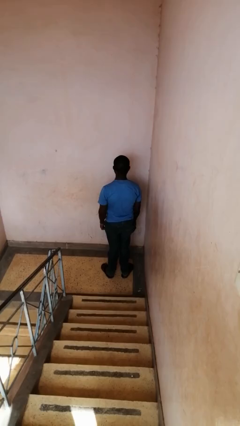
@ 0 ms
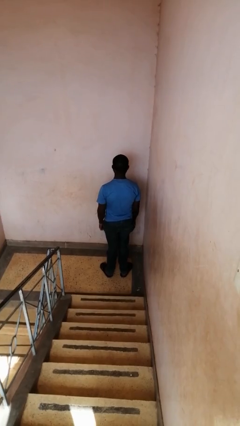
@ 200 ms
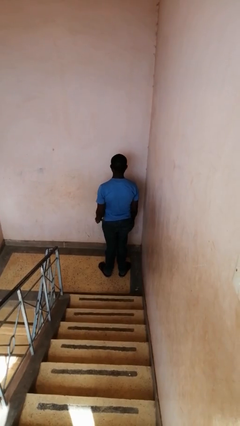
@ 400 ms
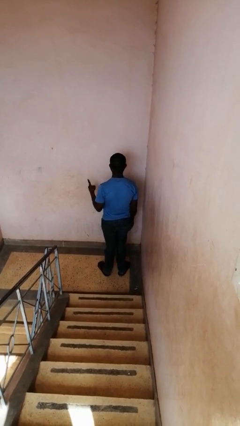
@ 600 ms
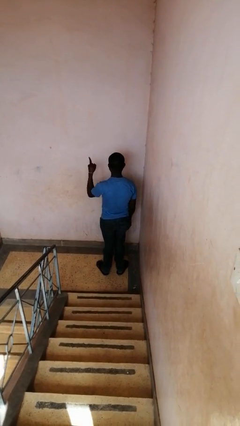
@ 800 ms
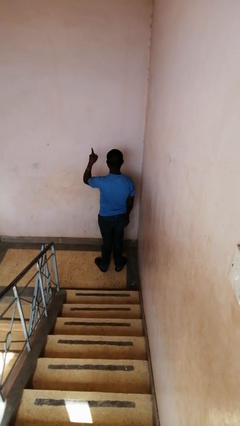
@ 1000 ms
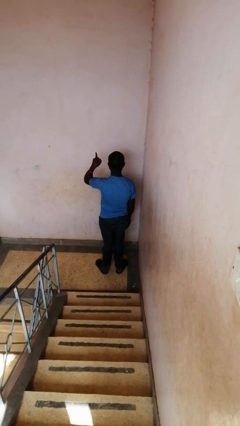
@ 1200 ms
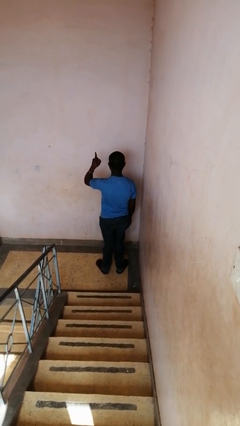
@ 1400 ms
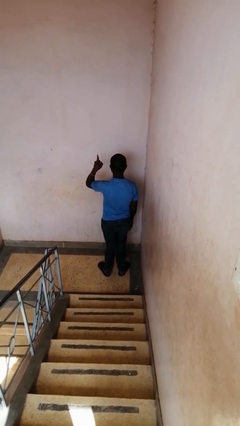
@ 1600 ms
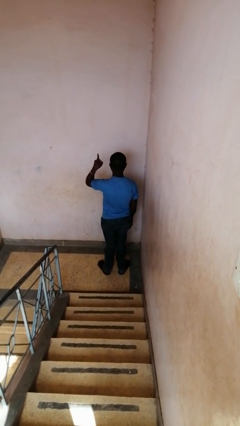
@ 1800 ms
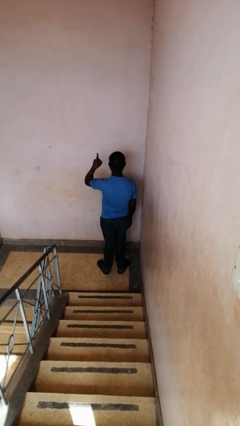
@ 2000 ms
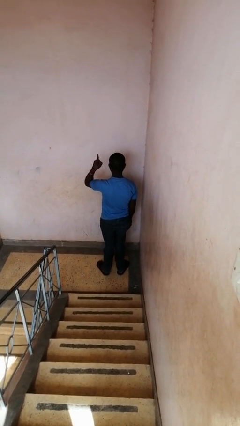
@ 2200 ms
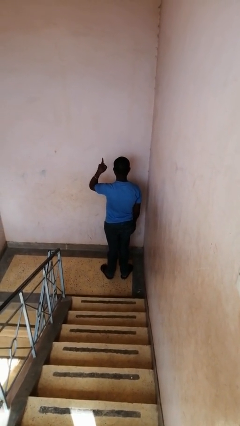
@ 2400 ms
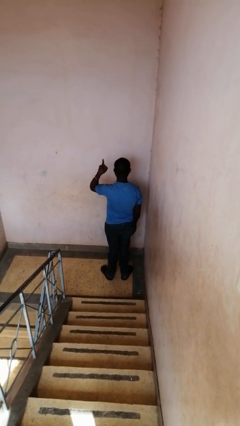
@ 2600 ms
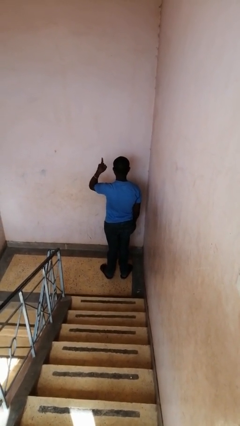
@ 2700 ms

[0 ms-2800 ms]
person gestures number one

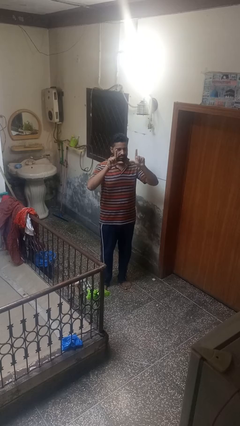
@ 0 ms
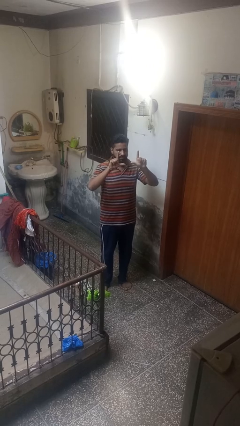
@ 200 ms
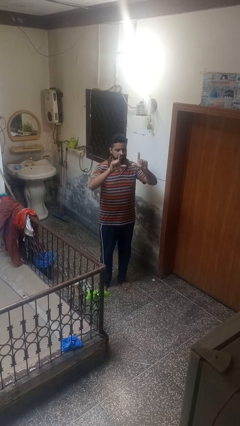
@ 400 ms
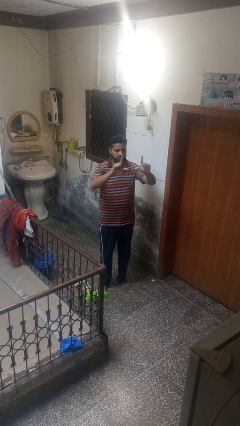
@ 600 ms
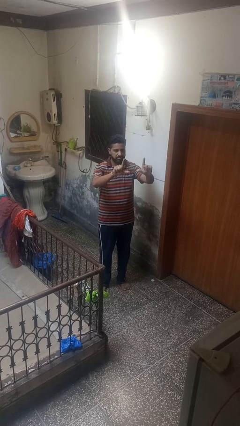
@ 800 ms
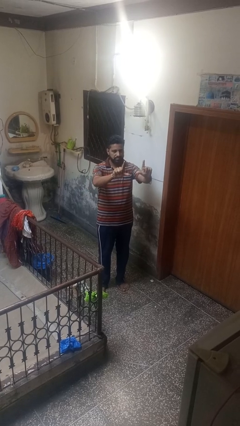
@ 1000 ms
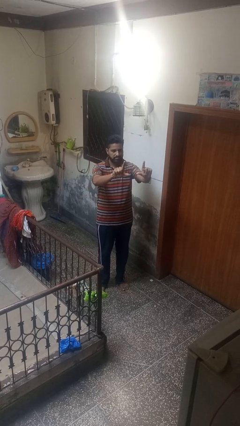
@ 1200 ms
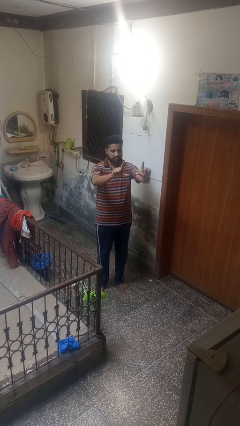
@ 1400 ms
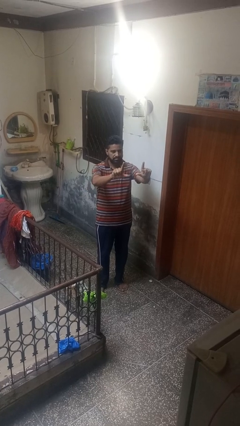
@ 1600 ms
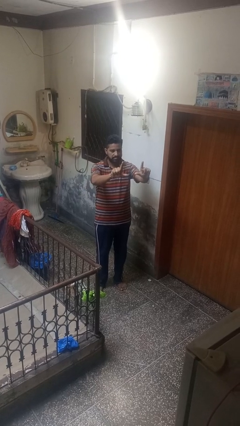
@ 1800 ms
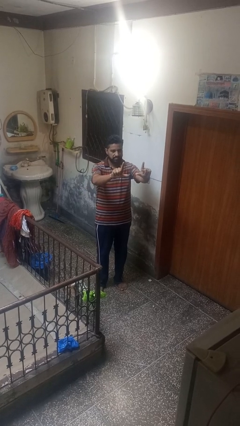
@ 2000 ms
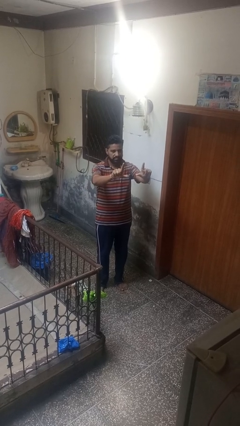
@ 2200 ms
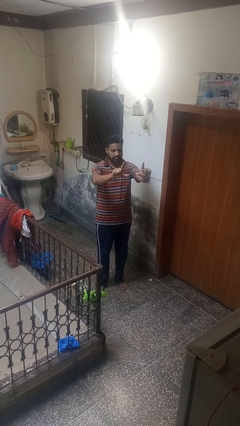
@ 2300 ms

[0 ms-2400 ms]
person gestures zoom out

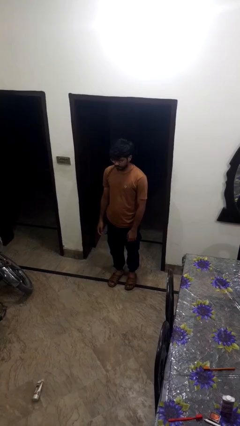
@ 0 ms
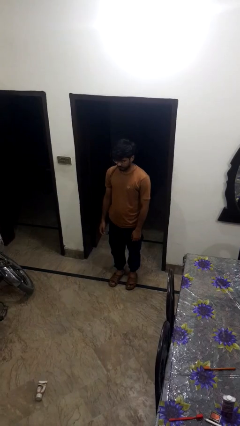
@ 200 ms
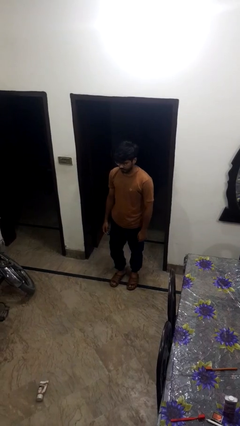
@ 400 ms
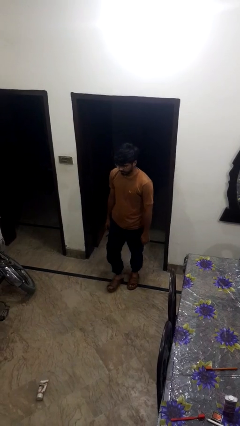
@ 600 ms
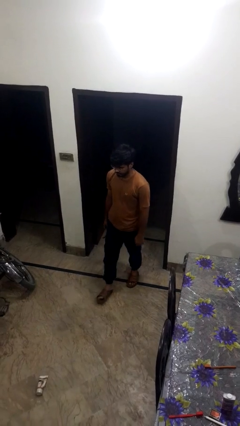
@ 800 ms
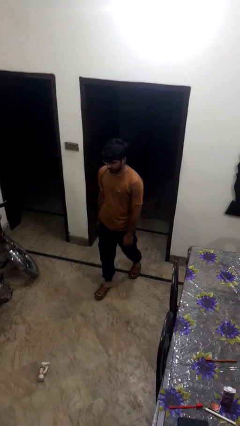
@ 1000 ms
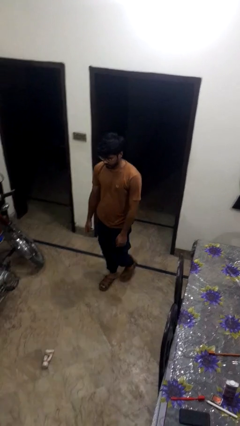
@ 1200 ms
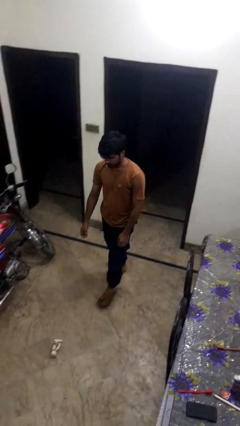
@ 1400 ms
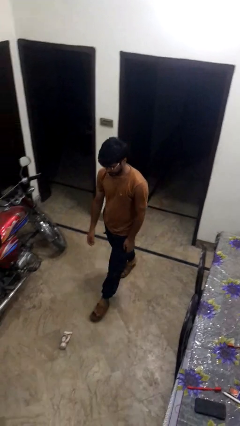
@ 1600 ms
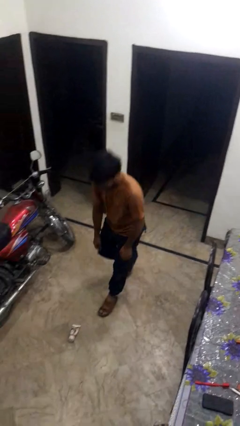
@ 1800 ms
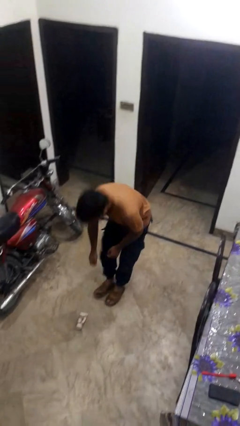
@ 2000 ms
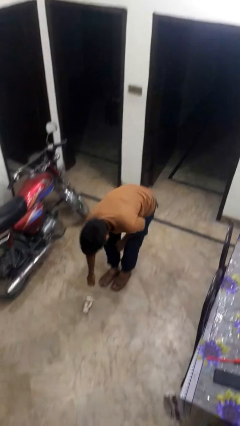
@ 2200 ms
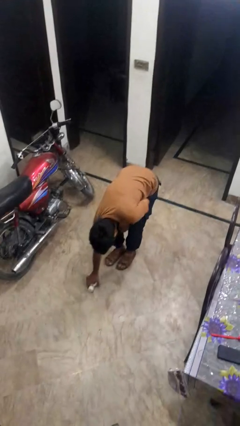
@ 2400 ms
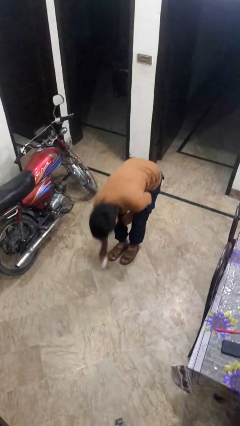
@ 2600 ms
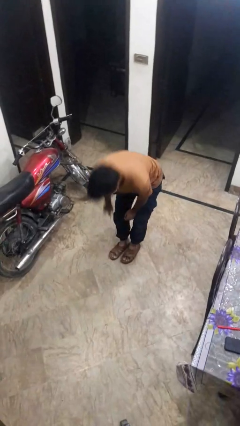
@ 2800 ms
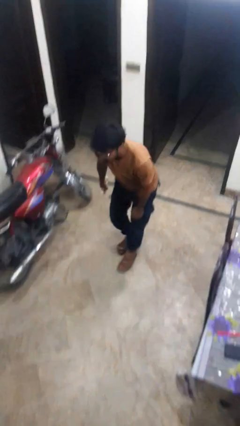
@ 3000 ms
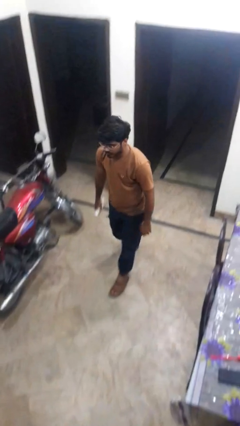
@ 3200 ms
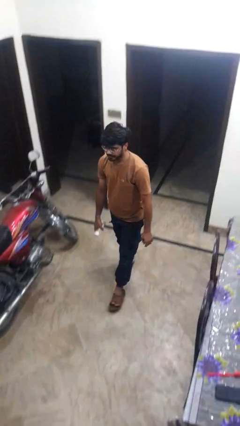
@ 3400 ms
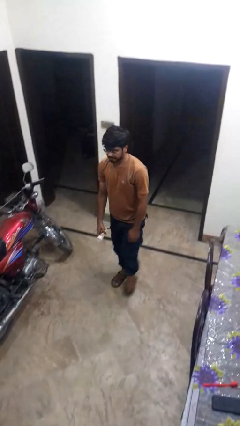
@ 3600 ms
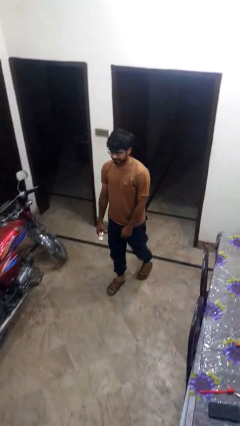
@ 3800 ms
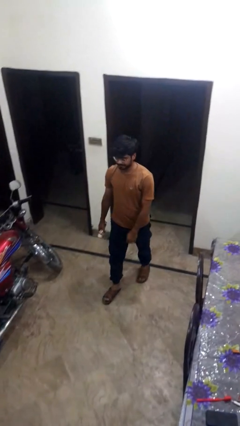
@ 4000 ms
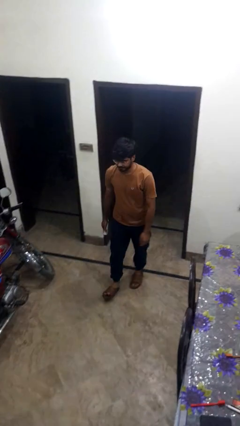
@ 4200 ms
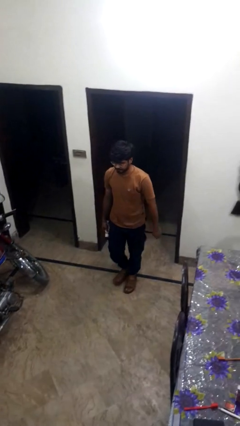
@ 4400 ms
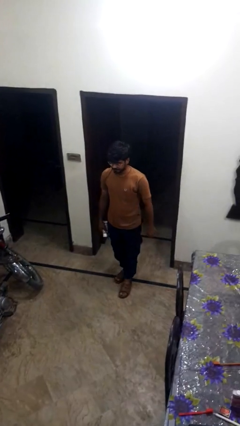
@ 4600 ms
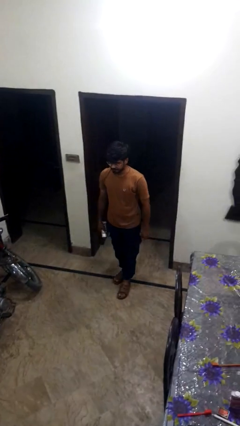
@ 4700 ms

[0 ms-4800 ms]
person picks up object from floor

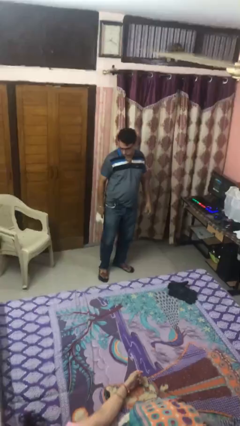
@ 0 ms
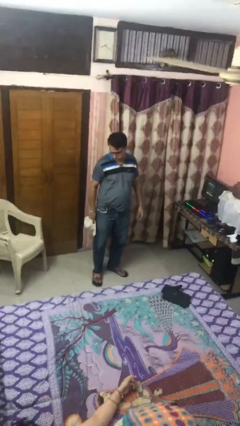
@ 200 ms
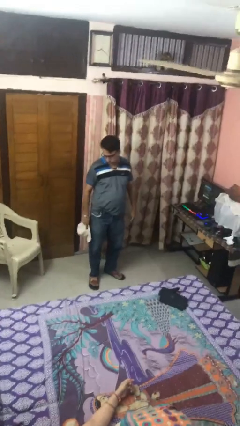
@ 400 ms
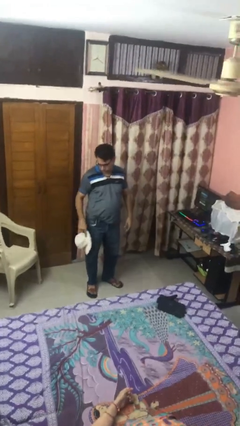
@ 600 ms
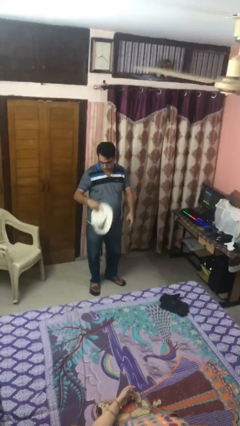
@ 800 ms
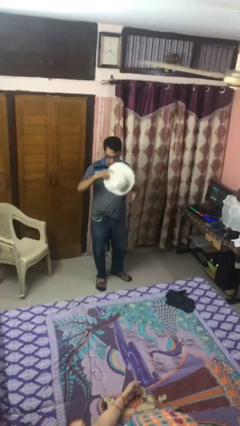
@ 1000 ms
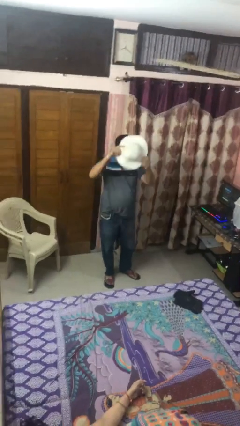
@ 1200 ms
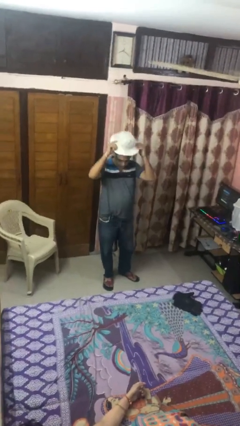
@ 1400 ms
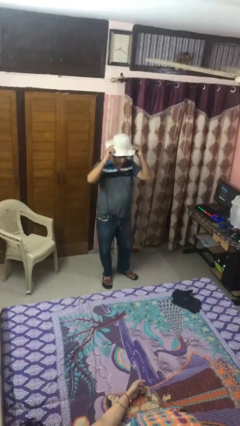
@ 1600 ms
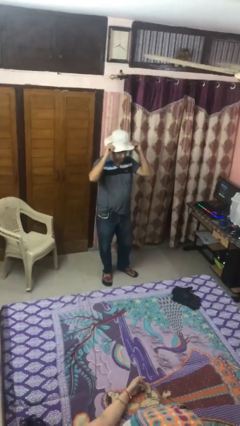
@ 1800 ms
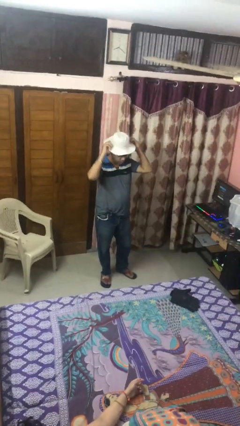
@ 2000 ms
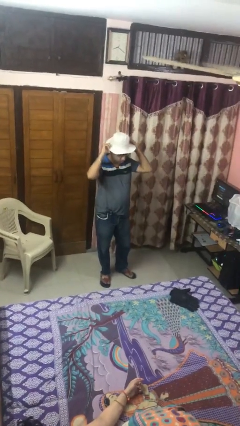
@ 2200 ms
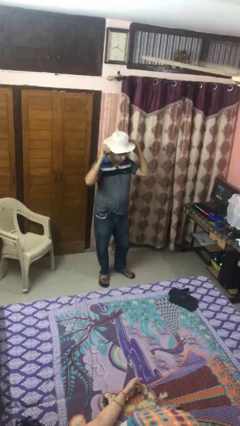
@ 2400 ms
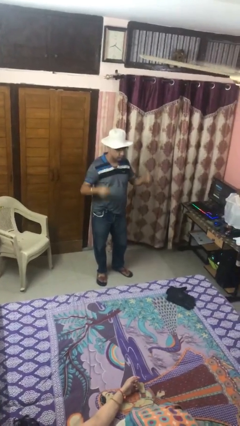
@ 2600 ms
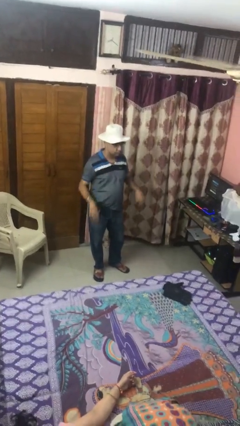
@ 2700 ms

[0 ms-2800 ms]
person puts on hat

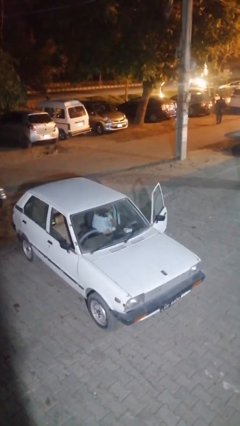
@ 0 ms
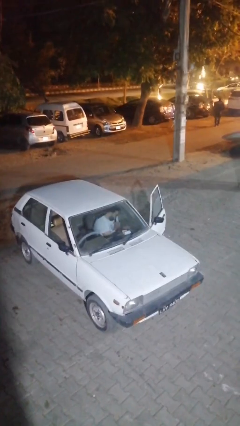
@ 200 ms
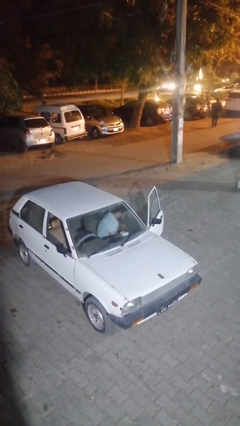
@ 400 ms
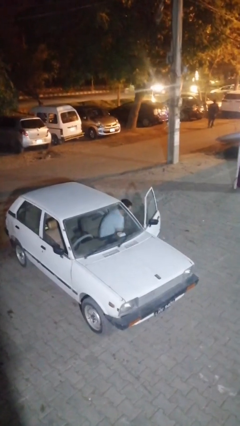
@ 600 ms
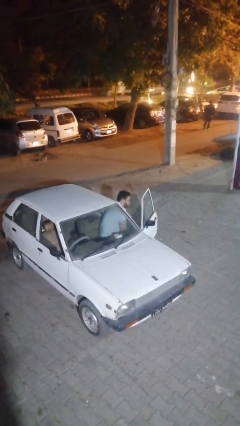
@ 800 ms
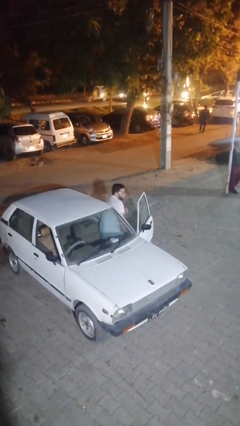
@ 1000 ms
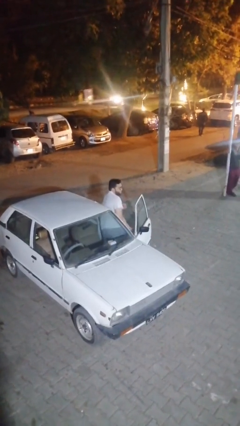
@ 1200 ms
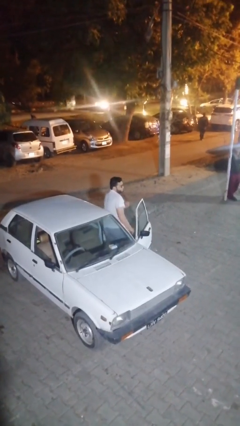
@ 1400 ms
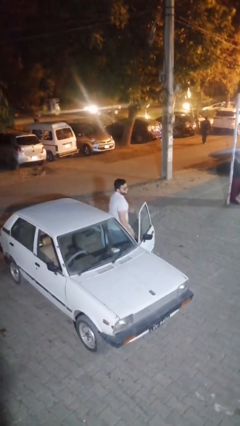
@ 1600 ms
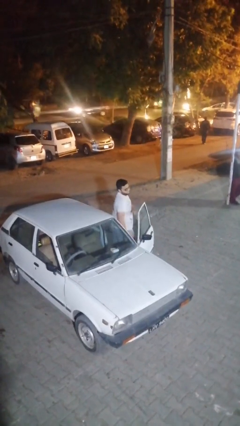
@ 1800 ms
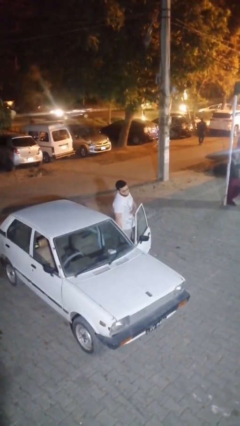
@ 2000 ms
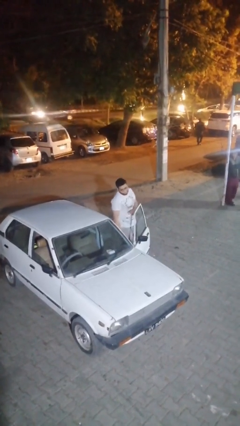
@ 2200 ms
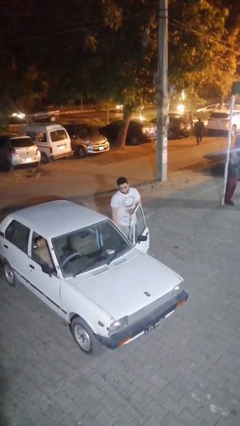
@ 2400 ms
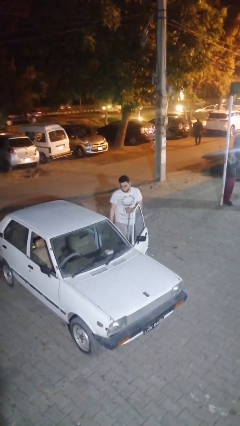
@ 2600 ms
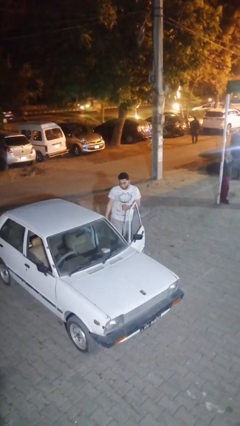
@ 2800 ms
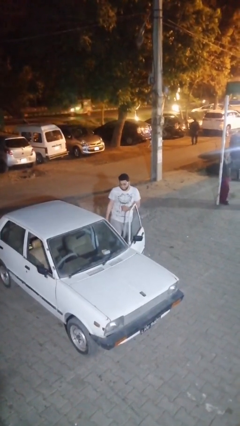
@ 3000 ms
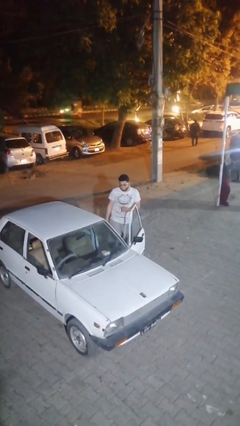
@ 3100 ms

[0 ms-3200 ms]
person exits car

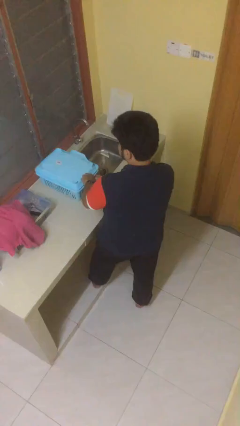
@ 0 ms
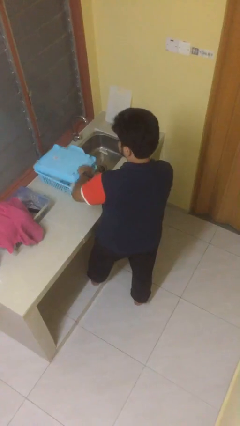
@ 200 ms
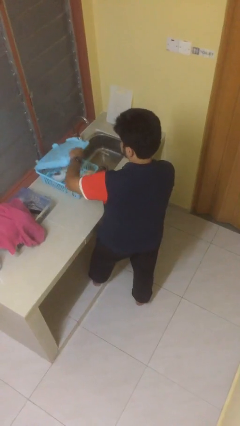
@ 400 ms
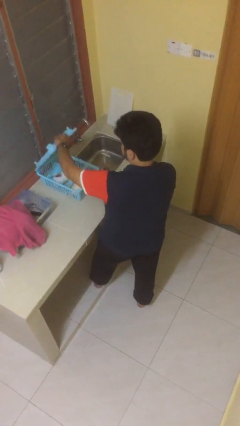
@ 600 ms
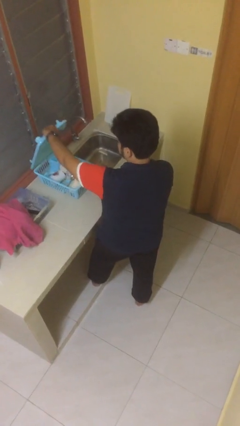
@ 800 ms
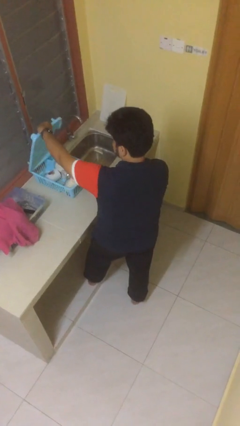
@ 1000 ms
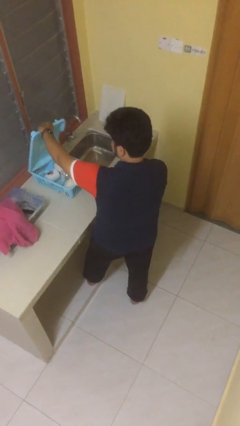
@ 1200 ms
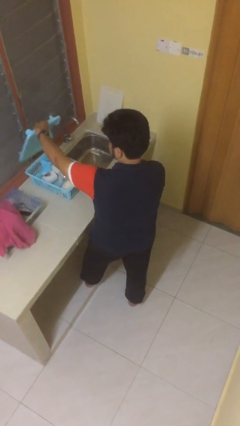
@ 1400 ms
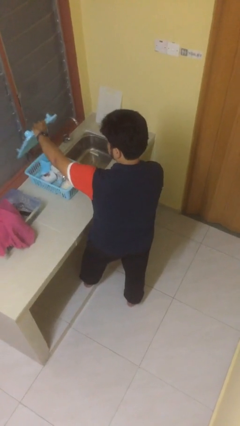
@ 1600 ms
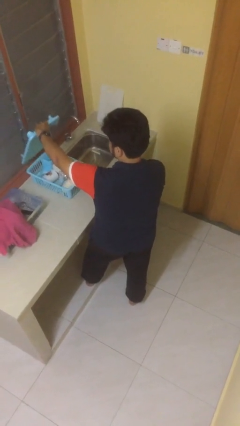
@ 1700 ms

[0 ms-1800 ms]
person opens dishwasher
